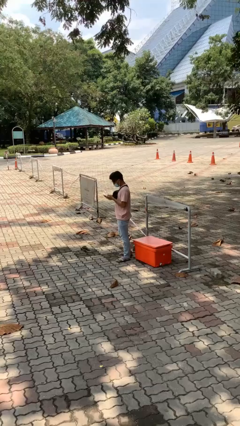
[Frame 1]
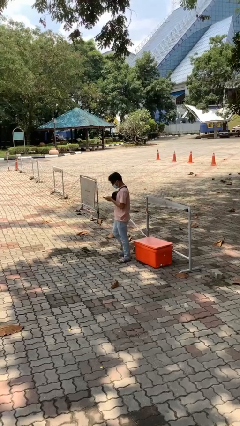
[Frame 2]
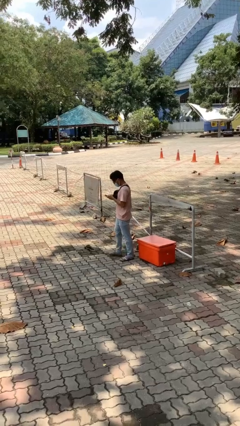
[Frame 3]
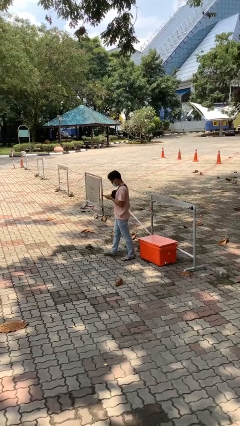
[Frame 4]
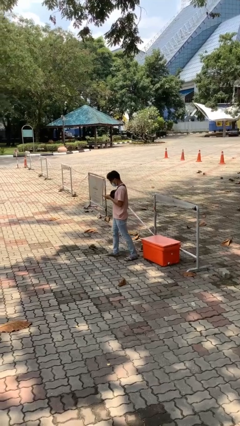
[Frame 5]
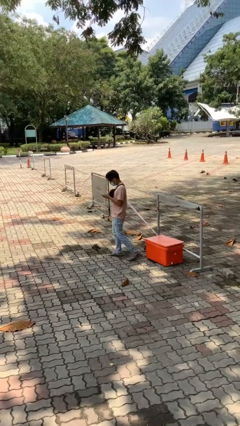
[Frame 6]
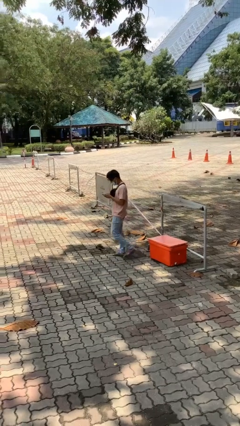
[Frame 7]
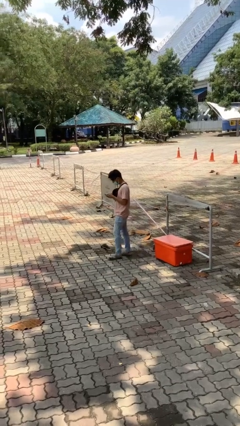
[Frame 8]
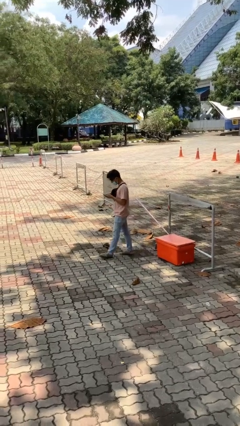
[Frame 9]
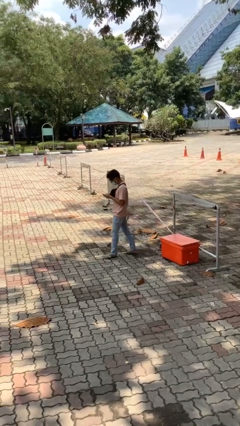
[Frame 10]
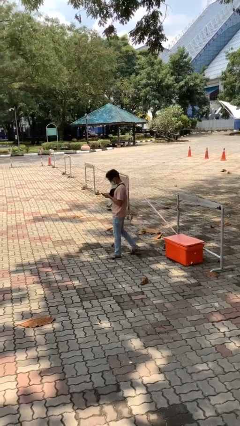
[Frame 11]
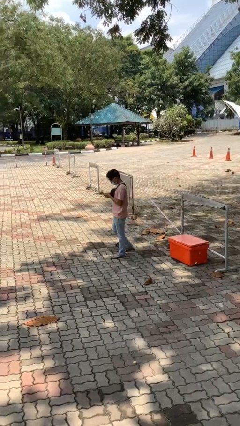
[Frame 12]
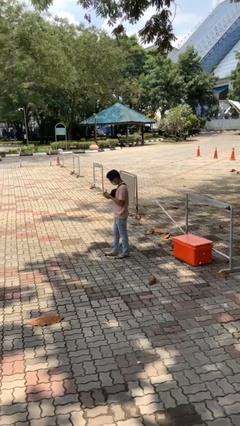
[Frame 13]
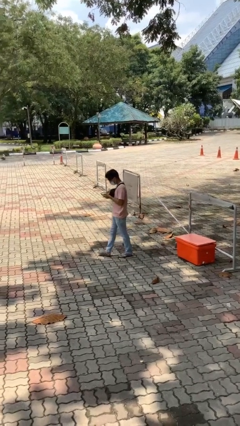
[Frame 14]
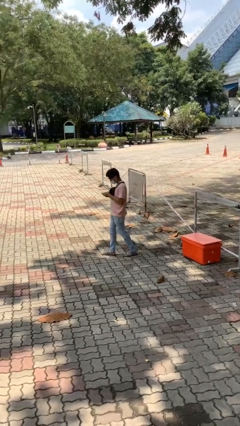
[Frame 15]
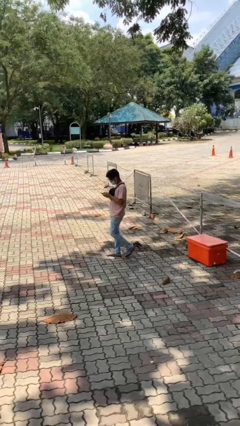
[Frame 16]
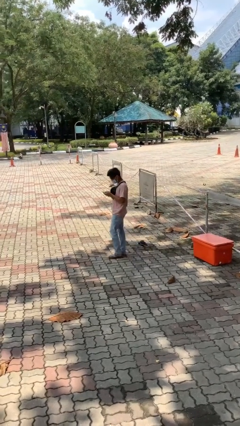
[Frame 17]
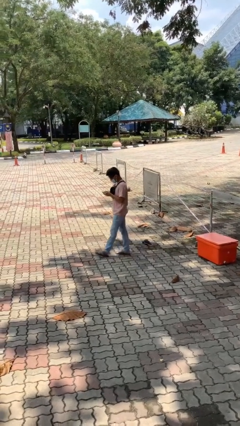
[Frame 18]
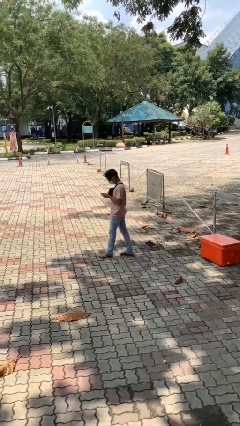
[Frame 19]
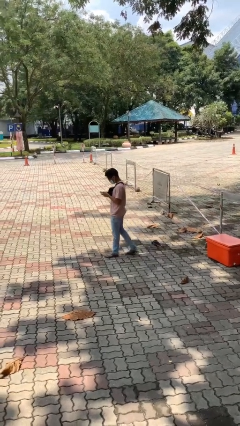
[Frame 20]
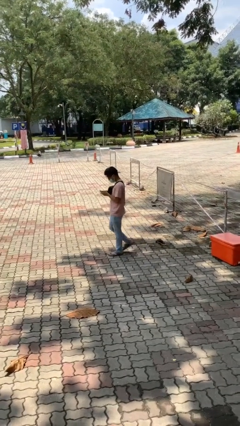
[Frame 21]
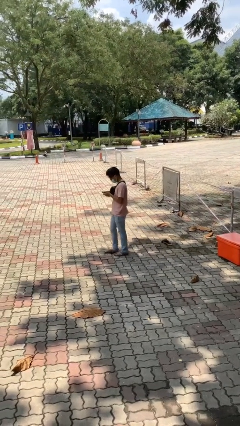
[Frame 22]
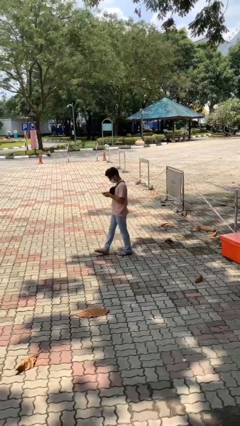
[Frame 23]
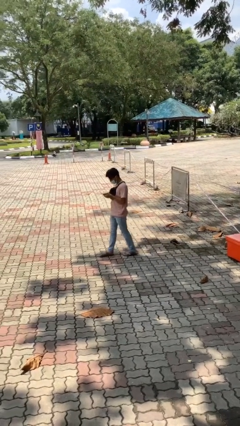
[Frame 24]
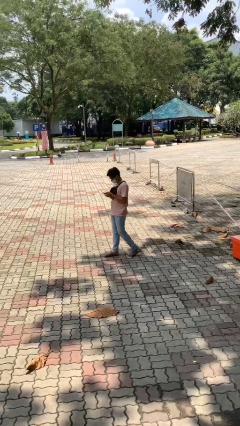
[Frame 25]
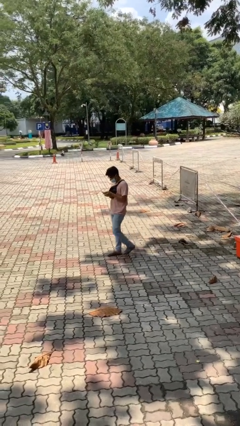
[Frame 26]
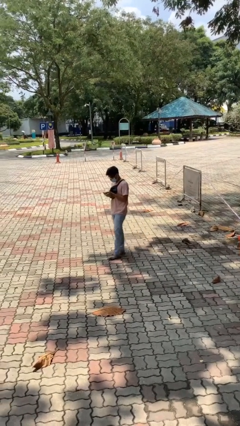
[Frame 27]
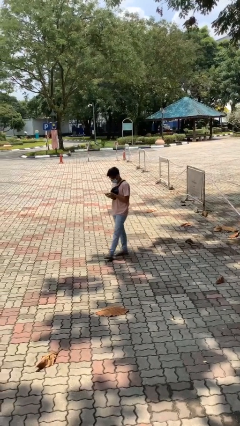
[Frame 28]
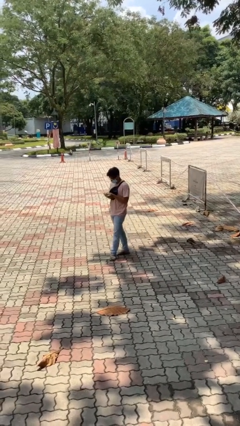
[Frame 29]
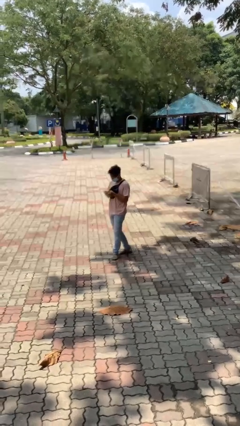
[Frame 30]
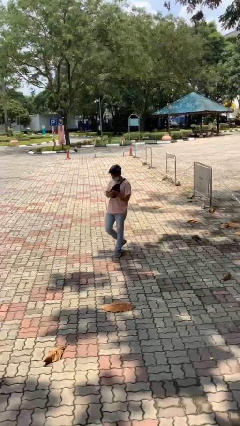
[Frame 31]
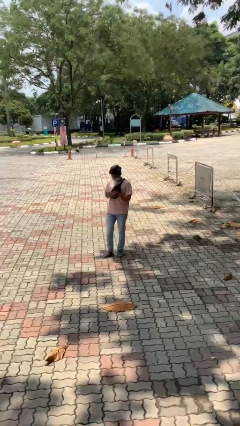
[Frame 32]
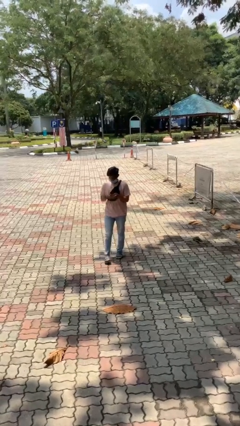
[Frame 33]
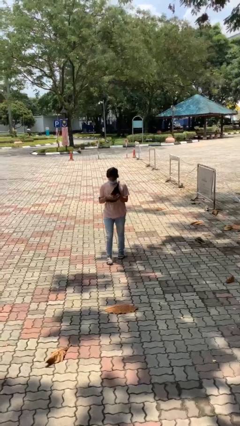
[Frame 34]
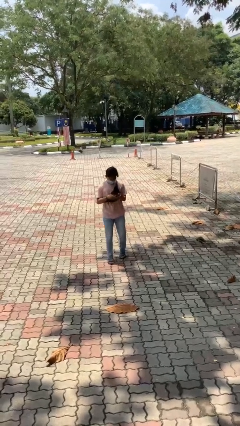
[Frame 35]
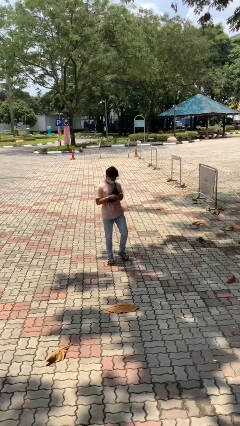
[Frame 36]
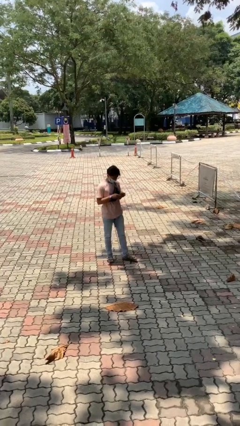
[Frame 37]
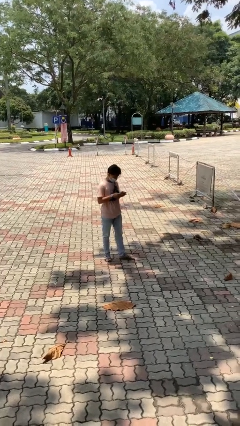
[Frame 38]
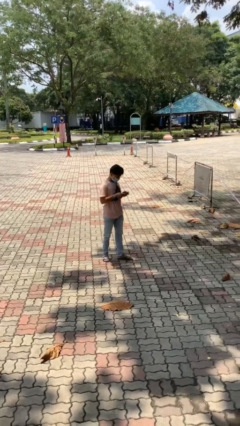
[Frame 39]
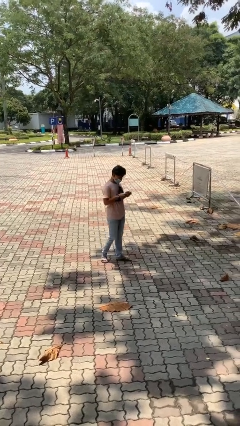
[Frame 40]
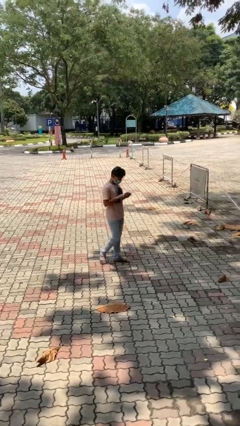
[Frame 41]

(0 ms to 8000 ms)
person texts on phone

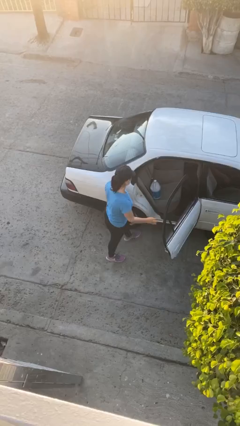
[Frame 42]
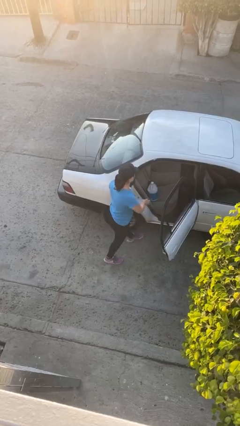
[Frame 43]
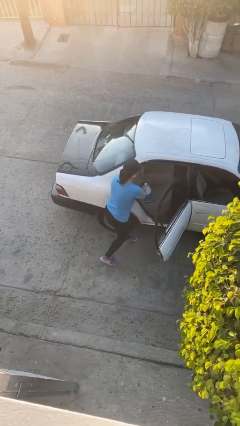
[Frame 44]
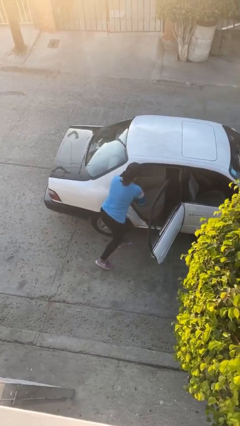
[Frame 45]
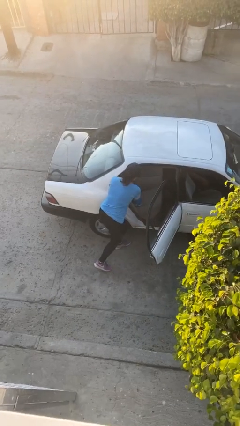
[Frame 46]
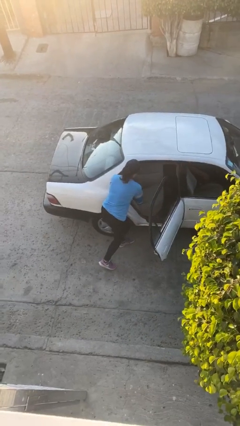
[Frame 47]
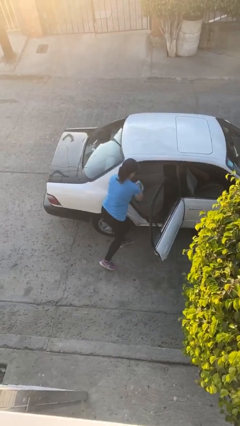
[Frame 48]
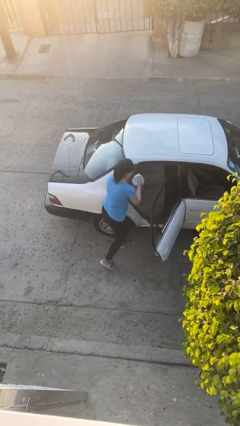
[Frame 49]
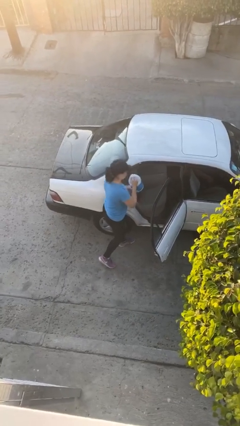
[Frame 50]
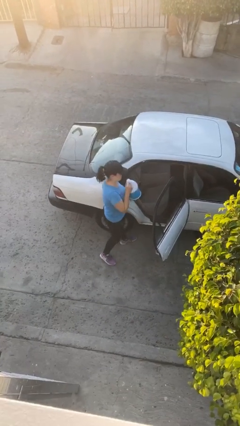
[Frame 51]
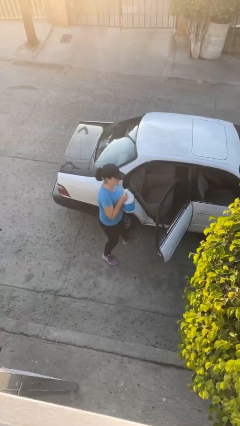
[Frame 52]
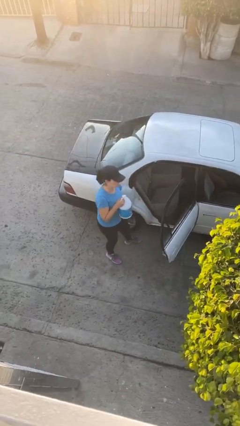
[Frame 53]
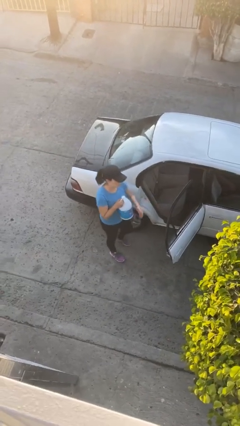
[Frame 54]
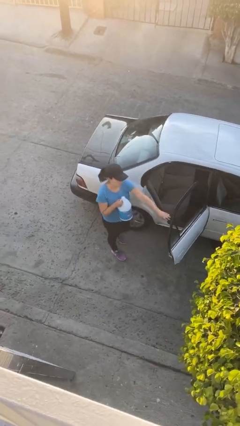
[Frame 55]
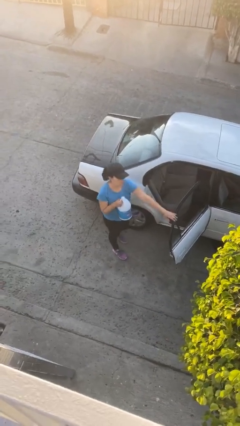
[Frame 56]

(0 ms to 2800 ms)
person unloads car

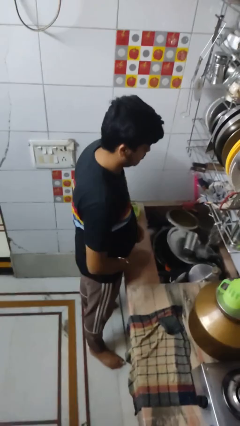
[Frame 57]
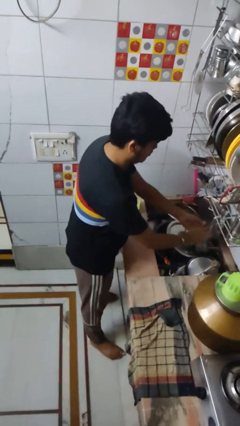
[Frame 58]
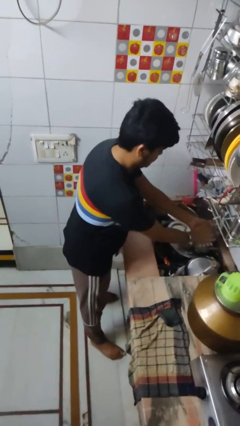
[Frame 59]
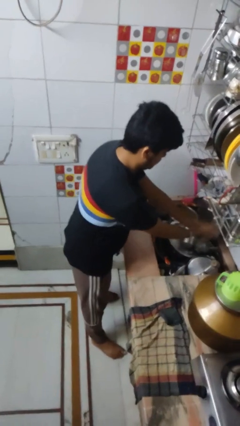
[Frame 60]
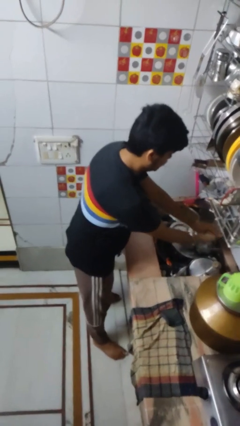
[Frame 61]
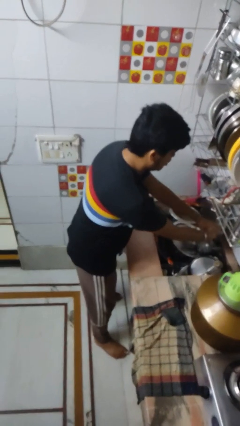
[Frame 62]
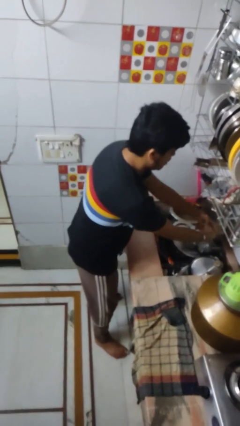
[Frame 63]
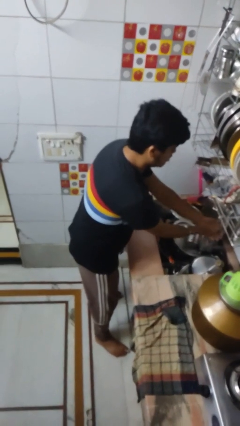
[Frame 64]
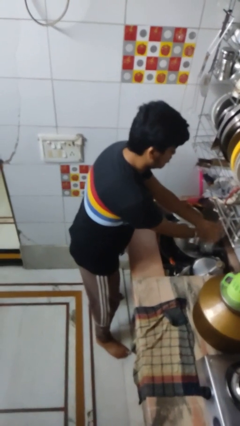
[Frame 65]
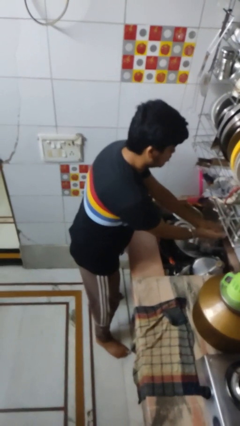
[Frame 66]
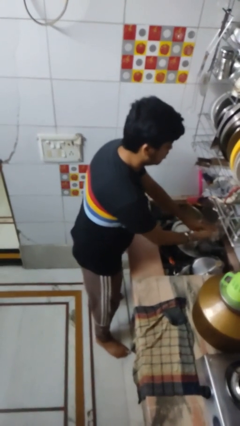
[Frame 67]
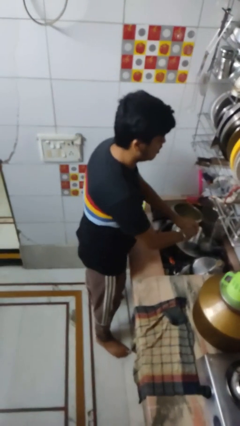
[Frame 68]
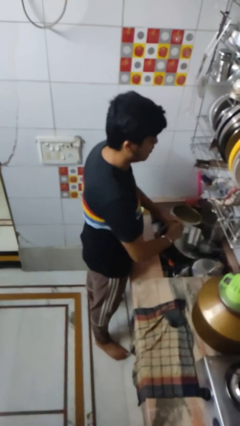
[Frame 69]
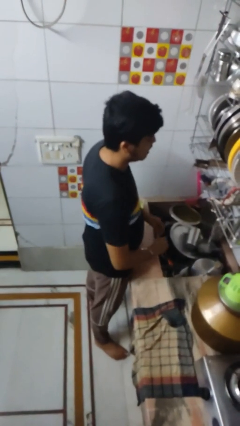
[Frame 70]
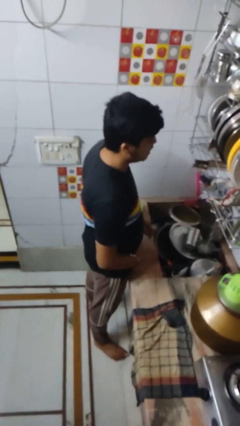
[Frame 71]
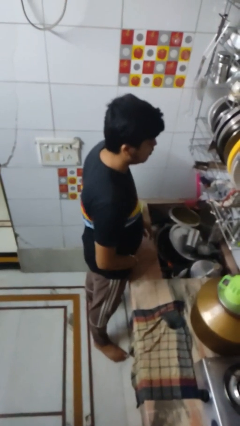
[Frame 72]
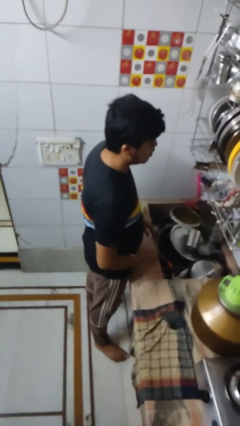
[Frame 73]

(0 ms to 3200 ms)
person washes hands

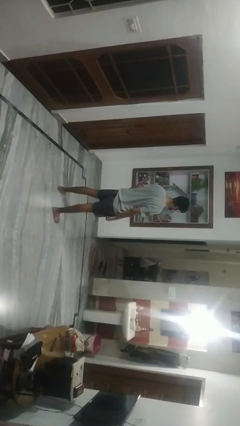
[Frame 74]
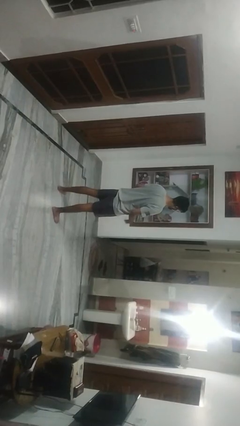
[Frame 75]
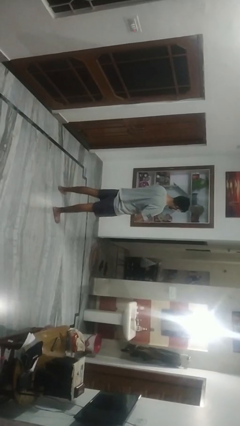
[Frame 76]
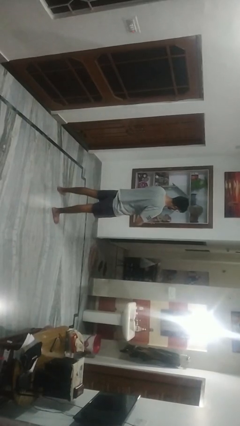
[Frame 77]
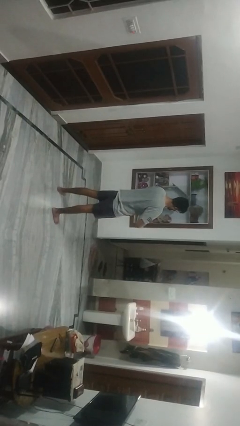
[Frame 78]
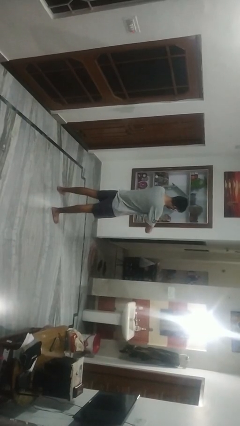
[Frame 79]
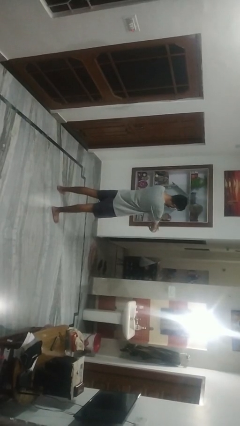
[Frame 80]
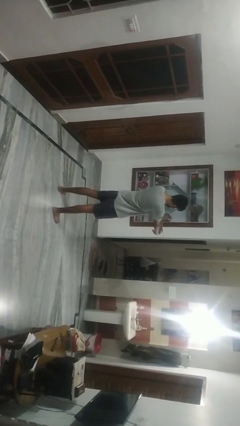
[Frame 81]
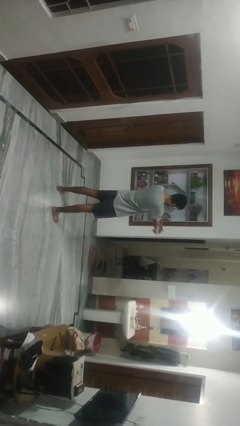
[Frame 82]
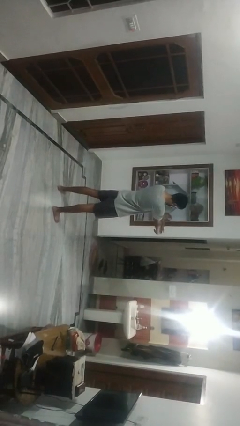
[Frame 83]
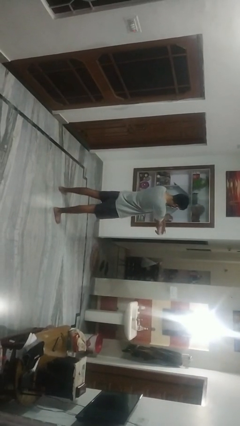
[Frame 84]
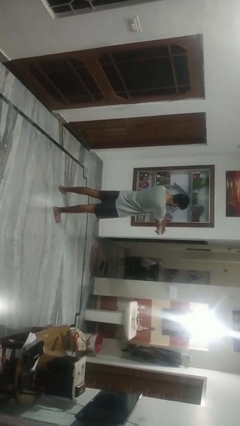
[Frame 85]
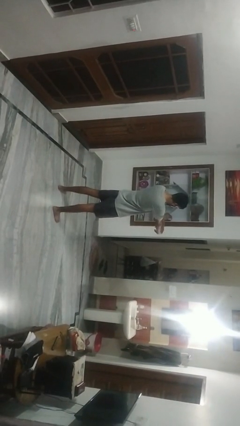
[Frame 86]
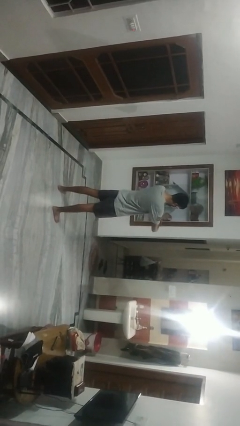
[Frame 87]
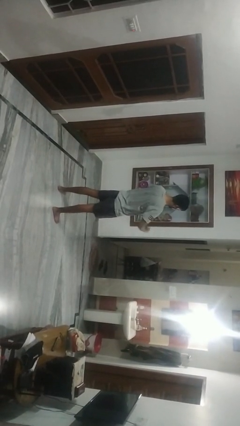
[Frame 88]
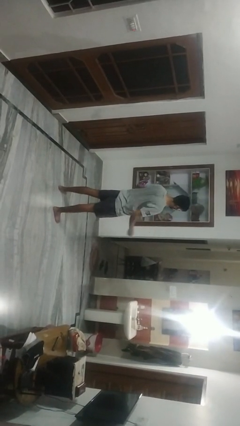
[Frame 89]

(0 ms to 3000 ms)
person cracks knuckles

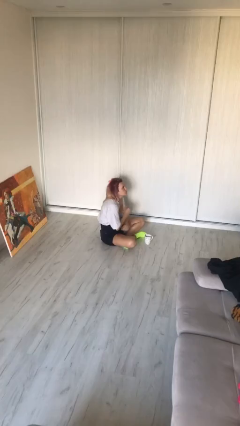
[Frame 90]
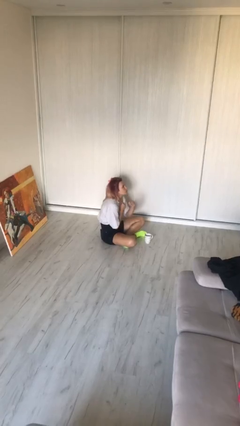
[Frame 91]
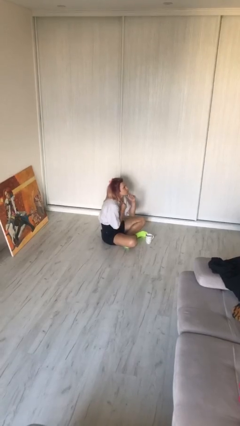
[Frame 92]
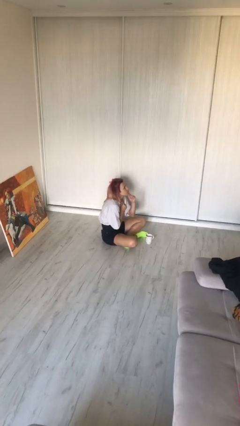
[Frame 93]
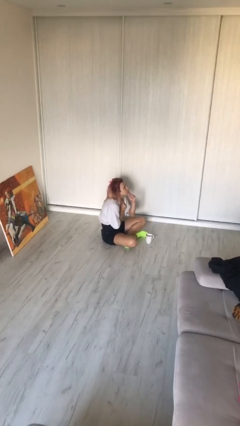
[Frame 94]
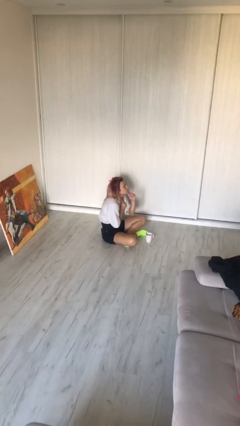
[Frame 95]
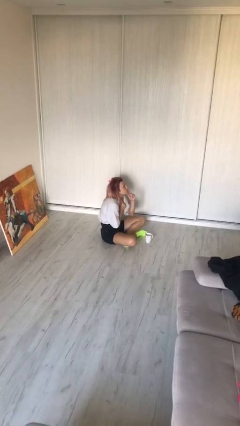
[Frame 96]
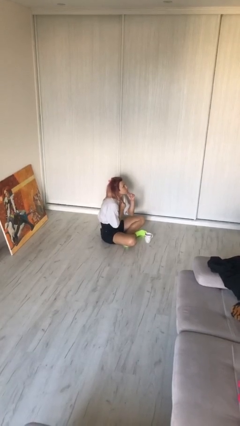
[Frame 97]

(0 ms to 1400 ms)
person strokes chin
